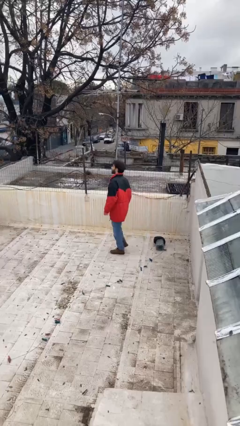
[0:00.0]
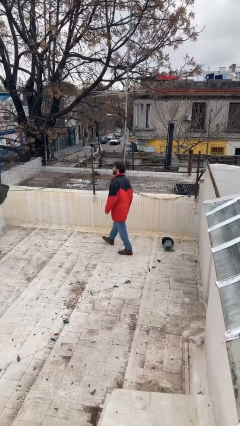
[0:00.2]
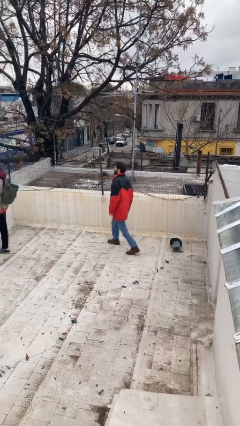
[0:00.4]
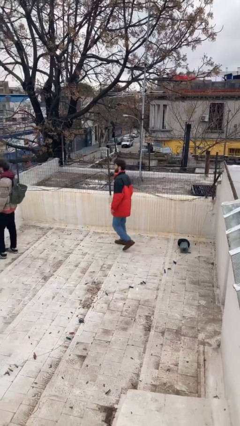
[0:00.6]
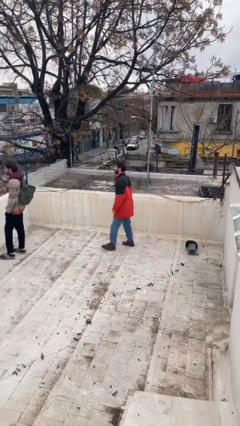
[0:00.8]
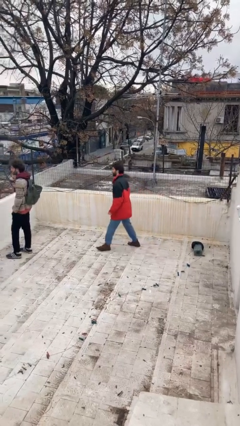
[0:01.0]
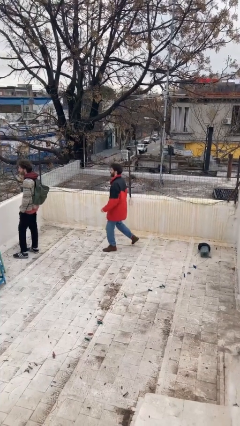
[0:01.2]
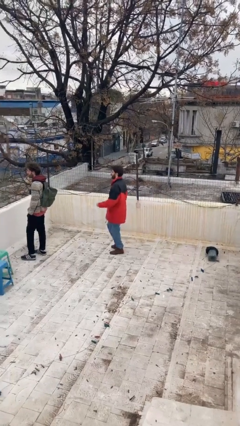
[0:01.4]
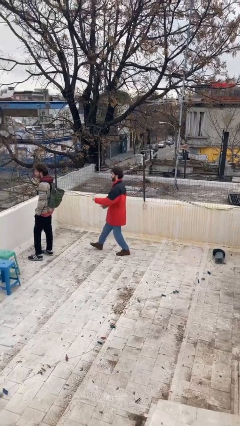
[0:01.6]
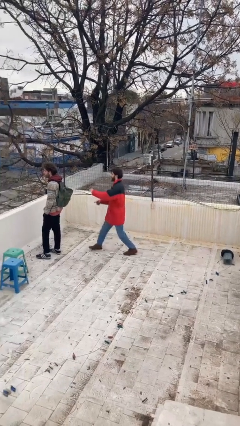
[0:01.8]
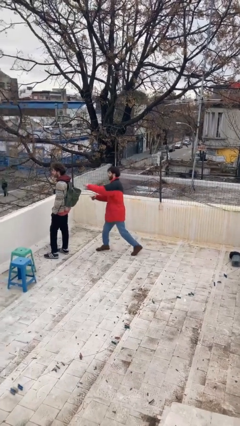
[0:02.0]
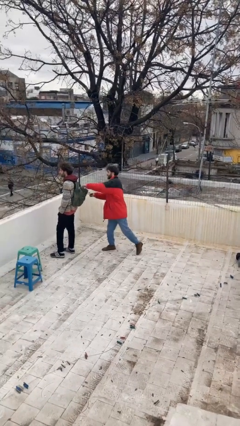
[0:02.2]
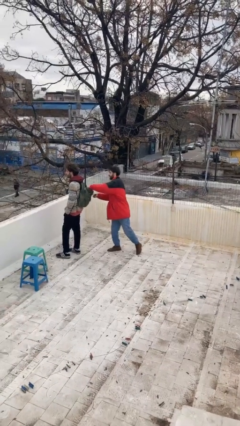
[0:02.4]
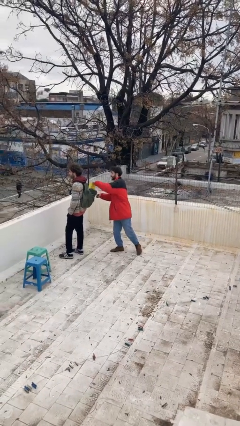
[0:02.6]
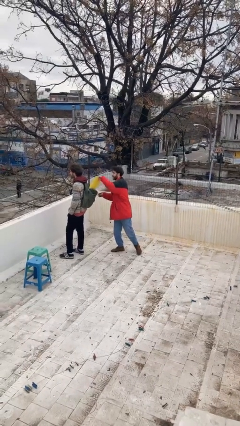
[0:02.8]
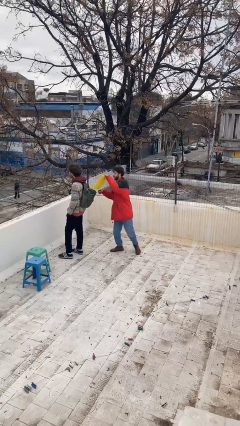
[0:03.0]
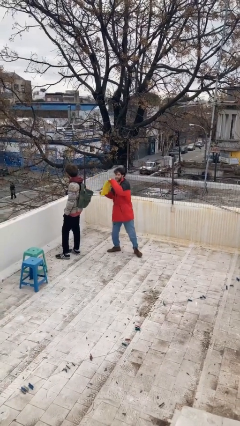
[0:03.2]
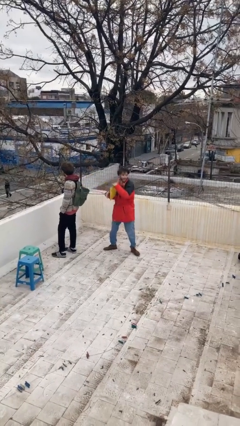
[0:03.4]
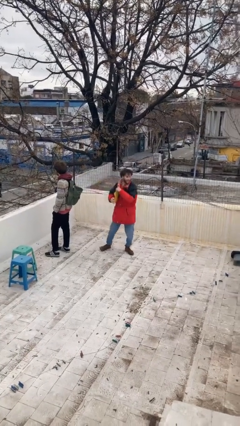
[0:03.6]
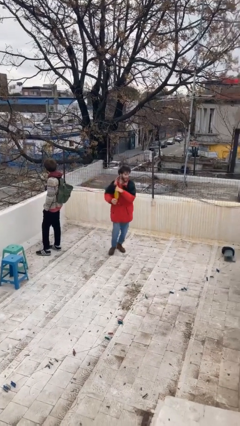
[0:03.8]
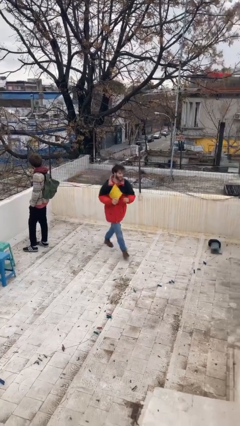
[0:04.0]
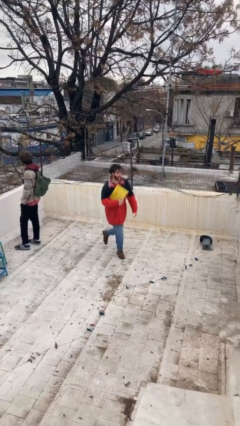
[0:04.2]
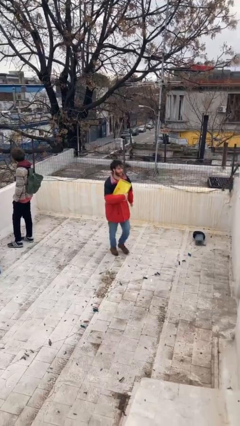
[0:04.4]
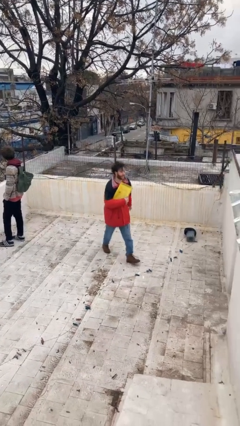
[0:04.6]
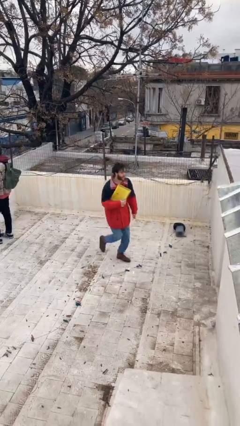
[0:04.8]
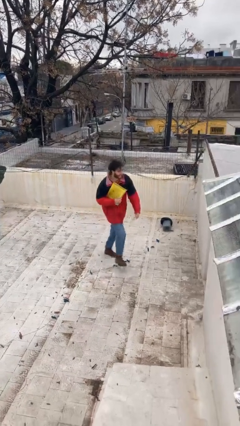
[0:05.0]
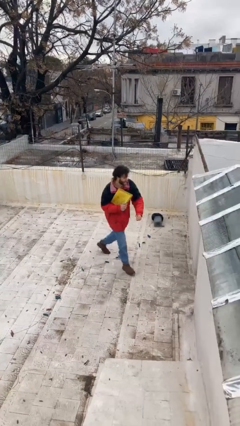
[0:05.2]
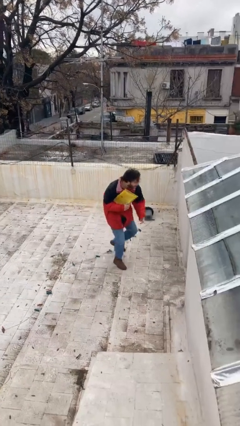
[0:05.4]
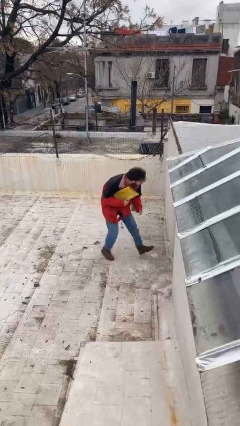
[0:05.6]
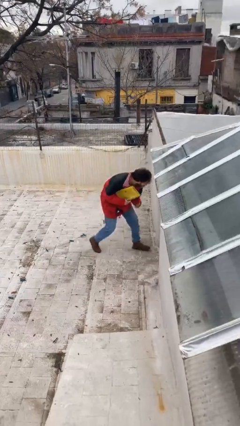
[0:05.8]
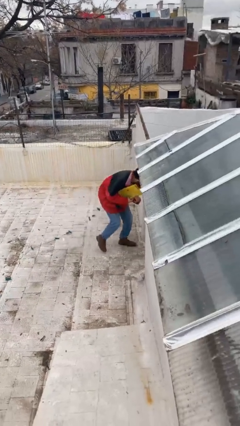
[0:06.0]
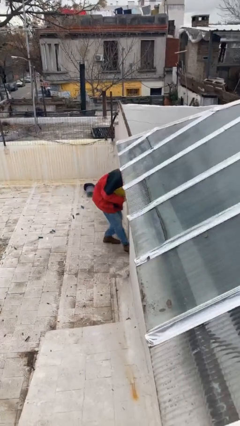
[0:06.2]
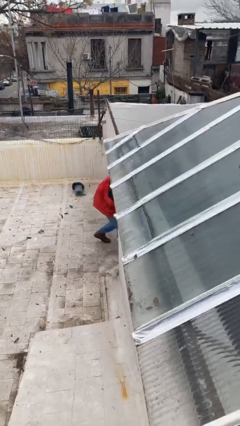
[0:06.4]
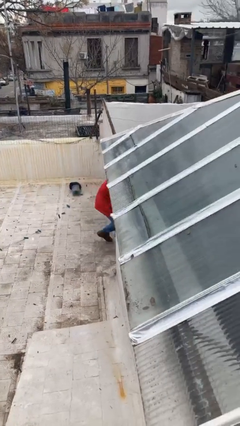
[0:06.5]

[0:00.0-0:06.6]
person steals object from person

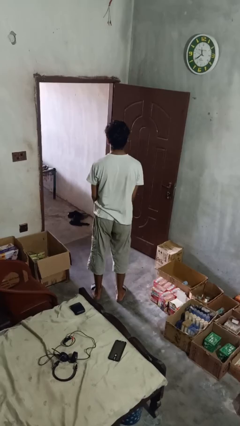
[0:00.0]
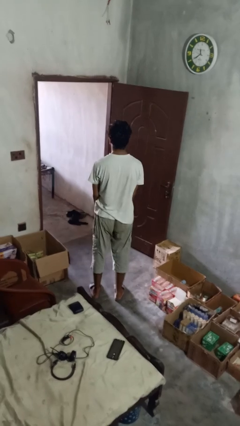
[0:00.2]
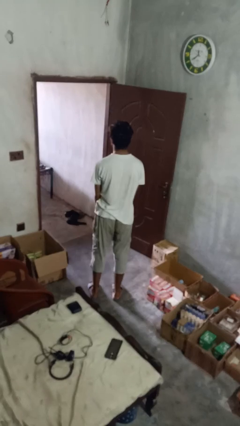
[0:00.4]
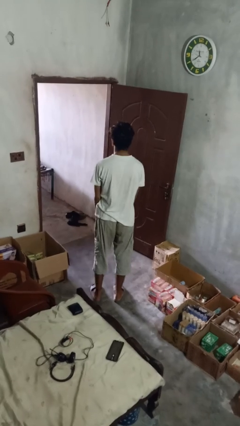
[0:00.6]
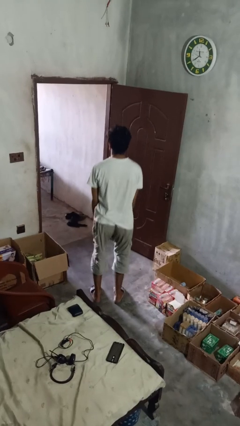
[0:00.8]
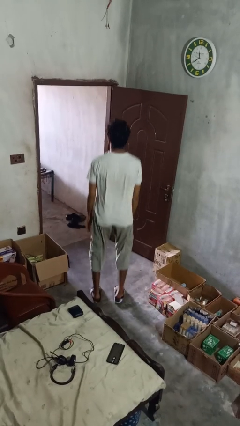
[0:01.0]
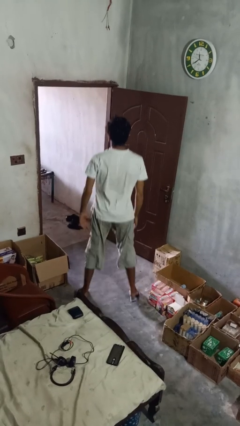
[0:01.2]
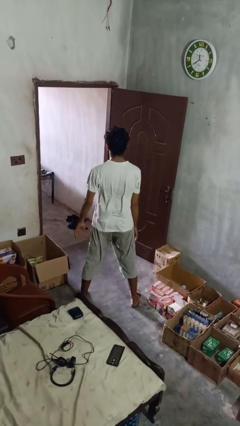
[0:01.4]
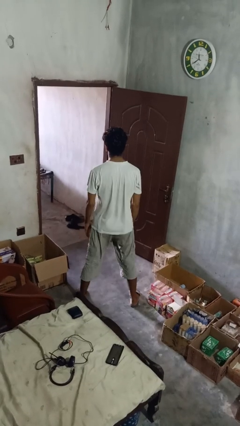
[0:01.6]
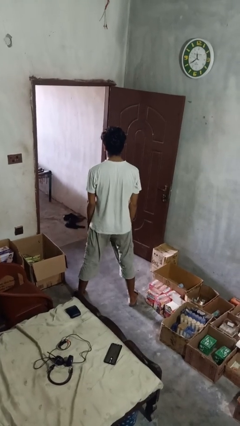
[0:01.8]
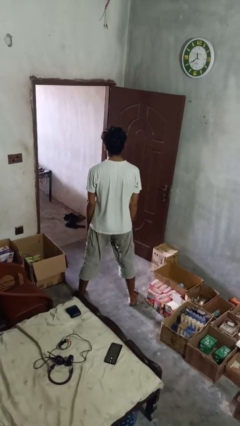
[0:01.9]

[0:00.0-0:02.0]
person stretches back

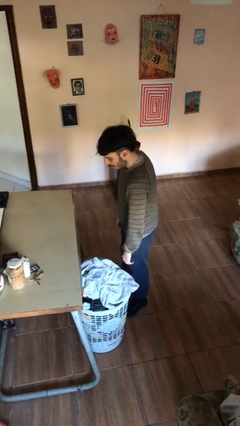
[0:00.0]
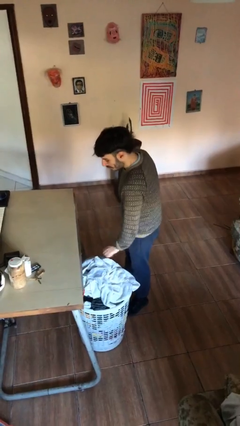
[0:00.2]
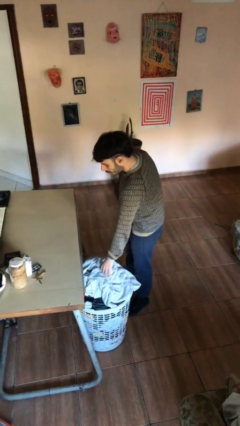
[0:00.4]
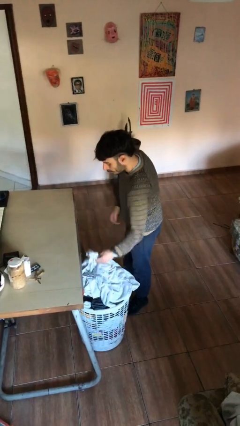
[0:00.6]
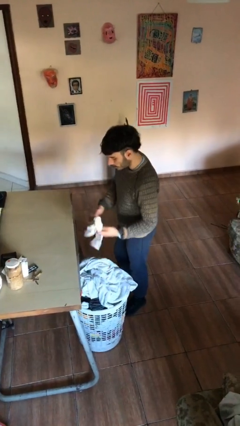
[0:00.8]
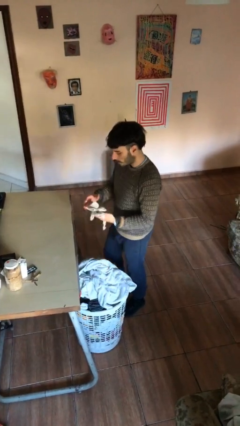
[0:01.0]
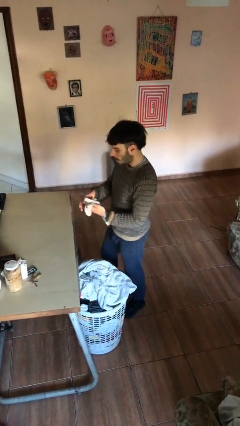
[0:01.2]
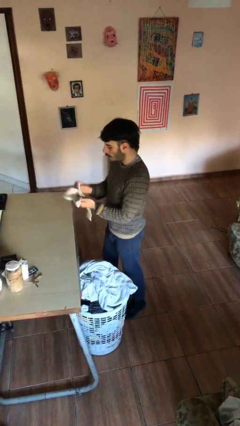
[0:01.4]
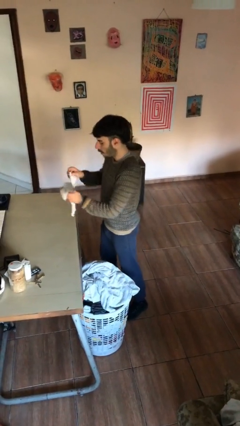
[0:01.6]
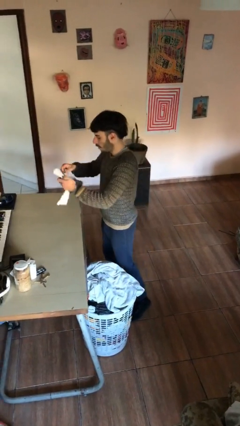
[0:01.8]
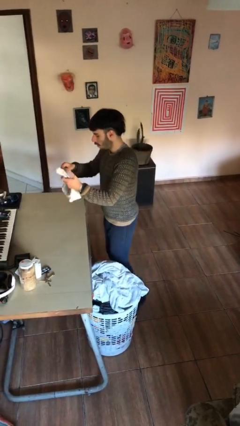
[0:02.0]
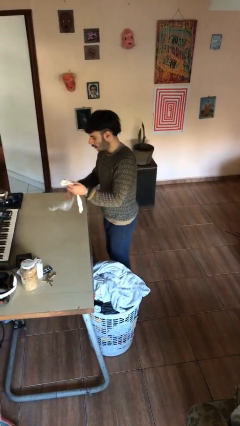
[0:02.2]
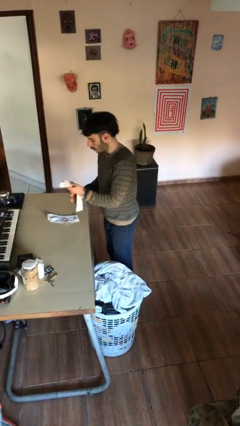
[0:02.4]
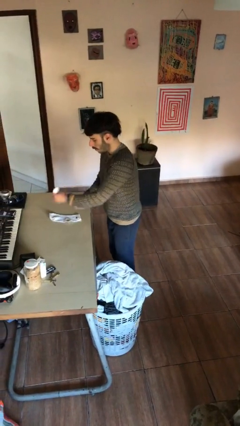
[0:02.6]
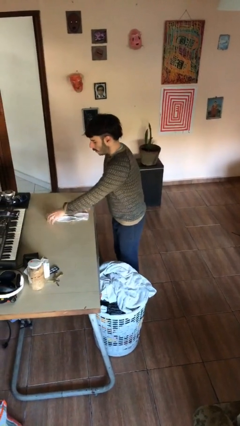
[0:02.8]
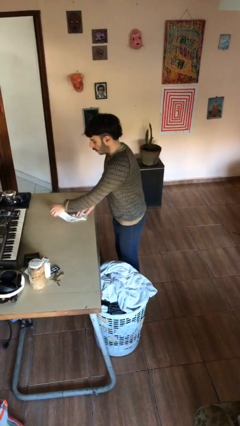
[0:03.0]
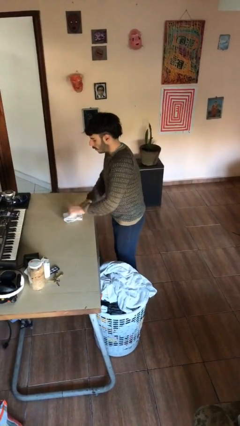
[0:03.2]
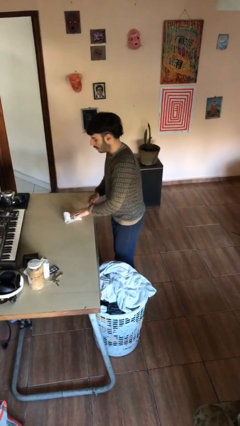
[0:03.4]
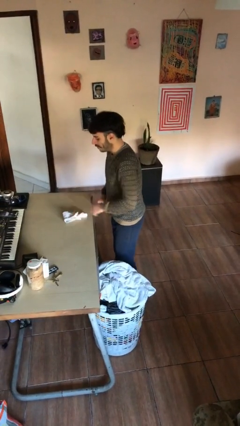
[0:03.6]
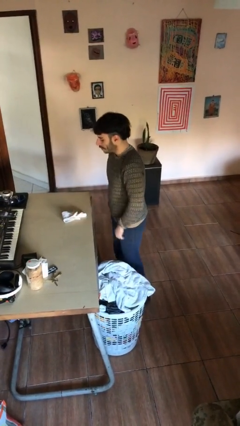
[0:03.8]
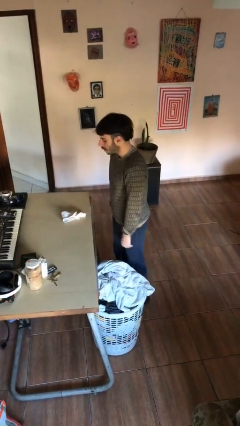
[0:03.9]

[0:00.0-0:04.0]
person folds socks

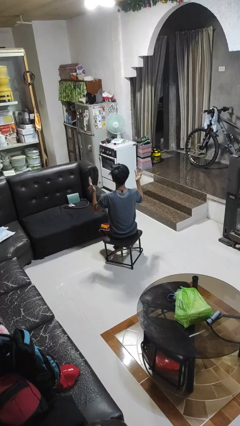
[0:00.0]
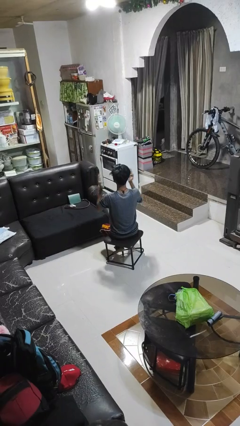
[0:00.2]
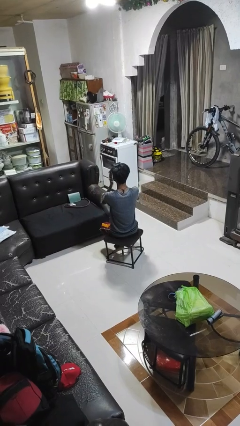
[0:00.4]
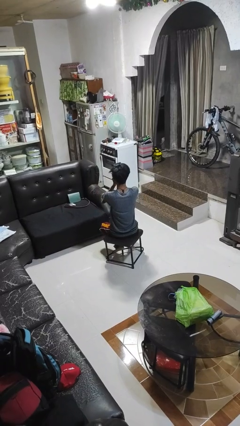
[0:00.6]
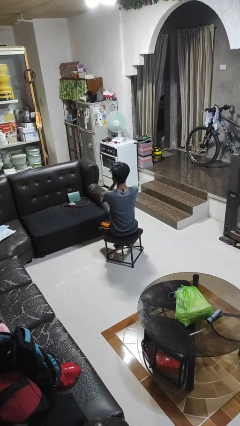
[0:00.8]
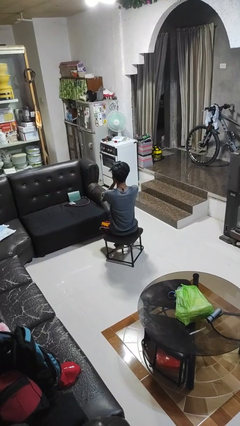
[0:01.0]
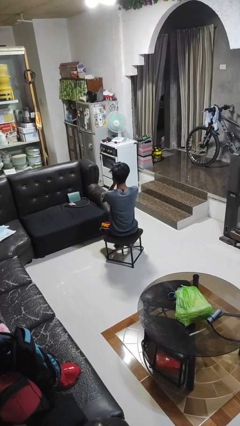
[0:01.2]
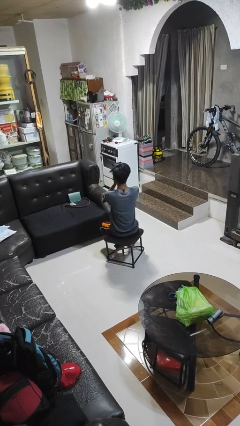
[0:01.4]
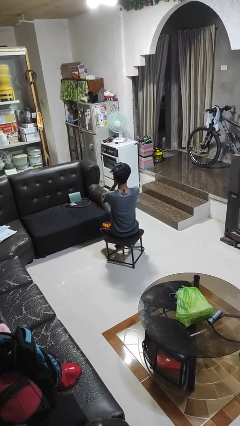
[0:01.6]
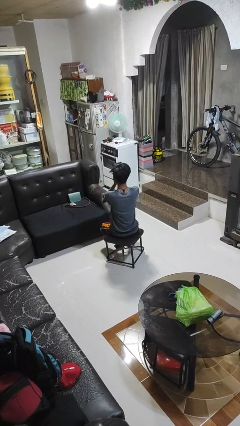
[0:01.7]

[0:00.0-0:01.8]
person covers face with hands

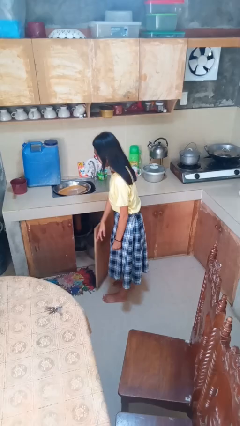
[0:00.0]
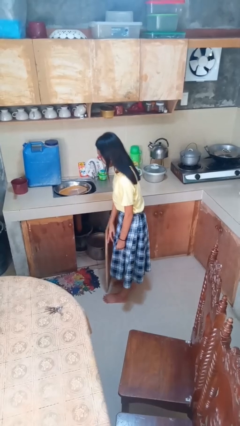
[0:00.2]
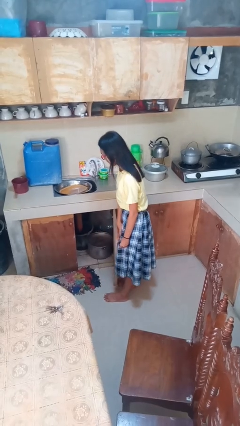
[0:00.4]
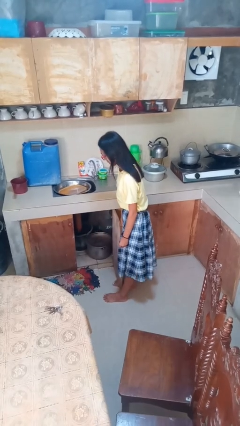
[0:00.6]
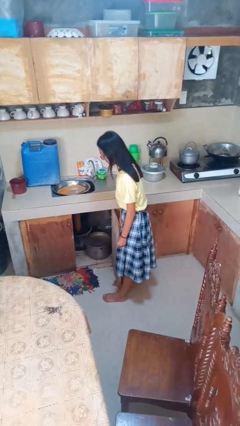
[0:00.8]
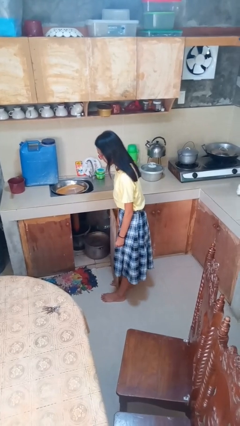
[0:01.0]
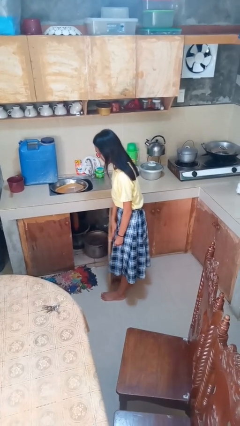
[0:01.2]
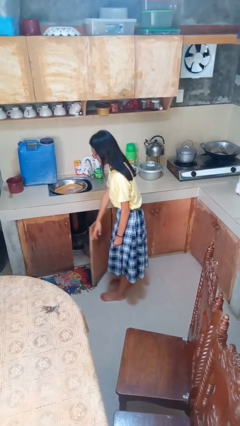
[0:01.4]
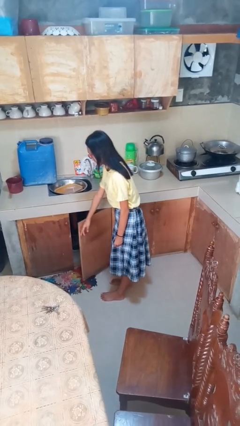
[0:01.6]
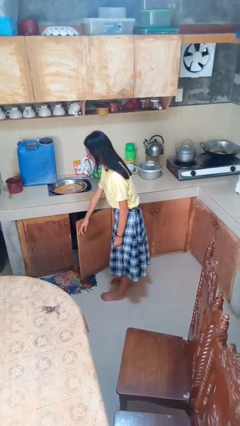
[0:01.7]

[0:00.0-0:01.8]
person opens cabinet

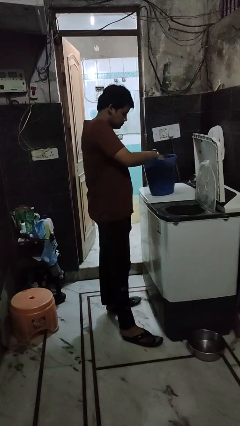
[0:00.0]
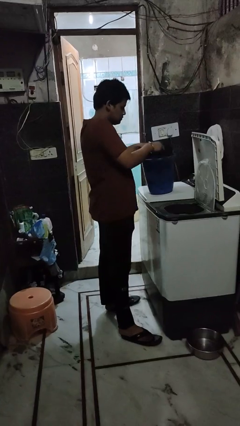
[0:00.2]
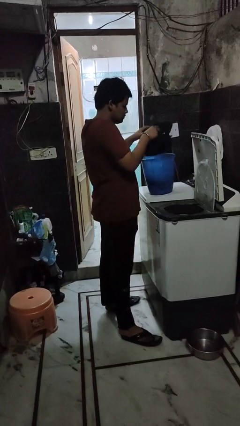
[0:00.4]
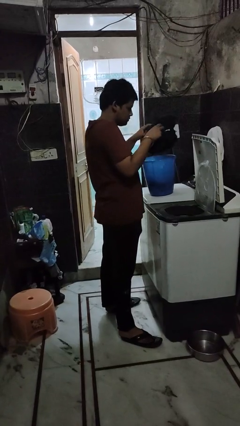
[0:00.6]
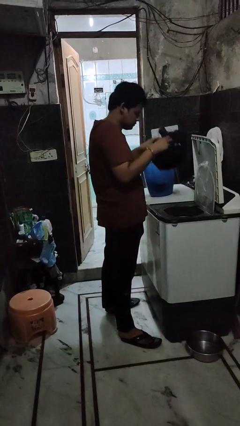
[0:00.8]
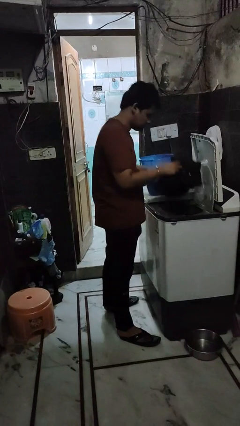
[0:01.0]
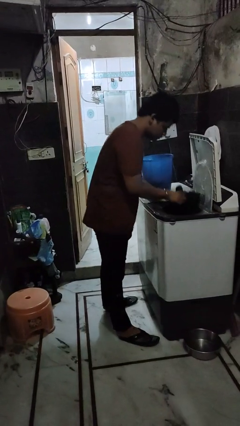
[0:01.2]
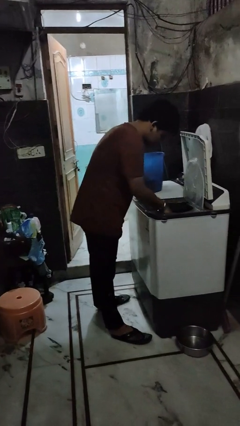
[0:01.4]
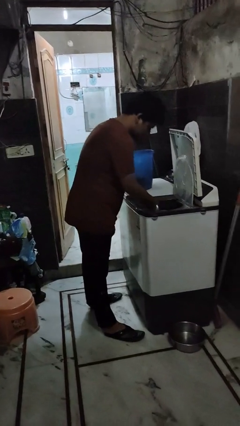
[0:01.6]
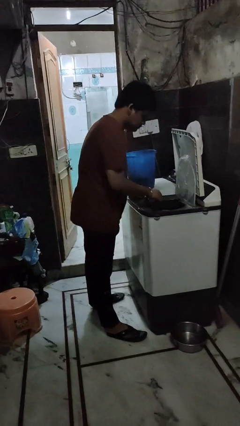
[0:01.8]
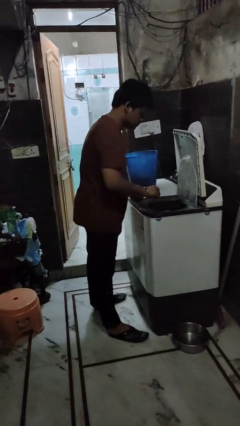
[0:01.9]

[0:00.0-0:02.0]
person loads dryer
